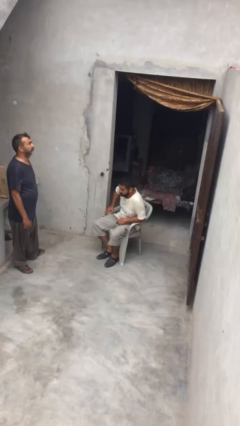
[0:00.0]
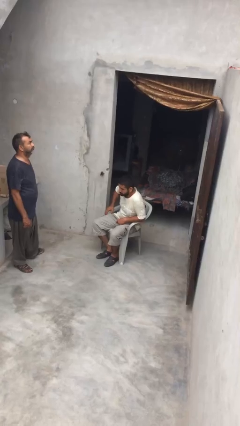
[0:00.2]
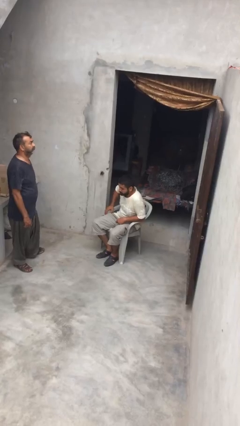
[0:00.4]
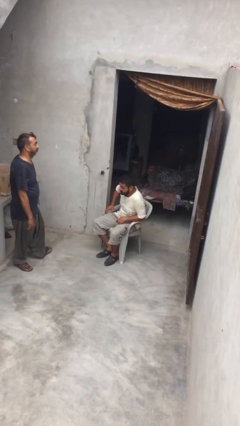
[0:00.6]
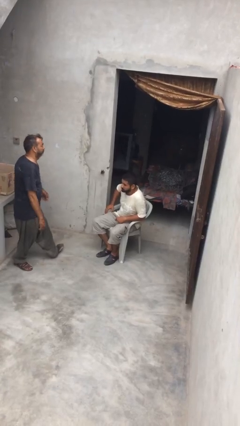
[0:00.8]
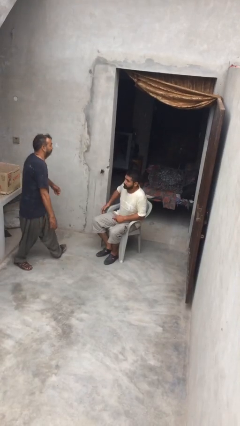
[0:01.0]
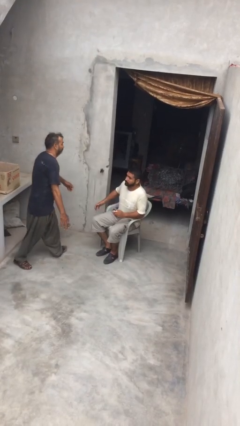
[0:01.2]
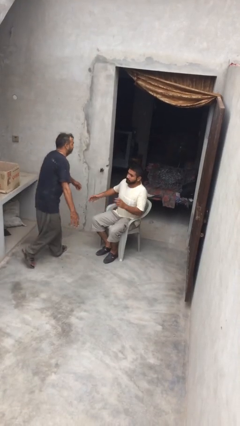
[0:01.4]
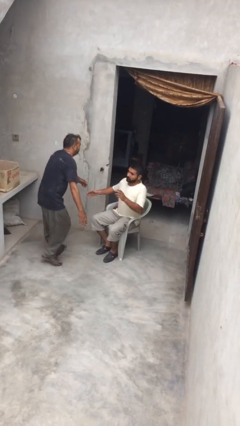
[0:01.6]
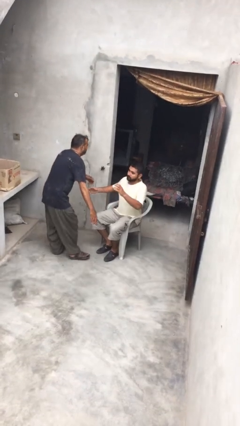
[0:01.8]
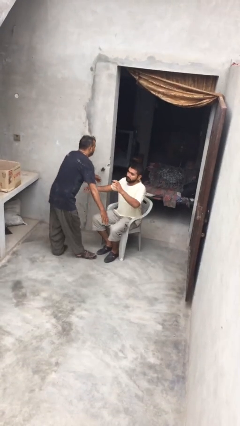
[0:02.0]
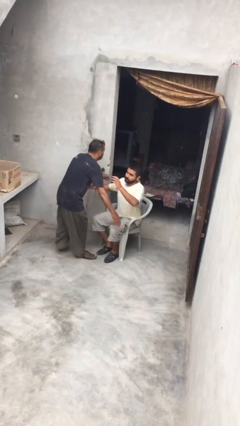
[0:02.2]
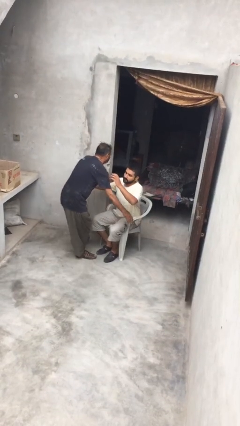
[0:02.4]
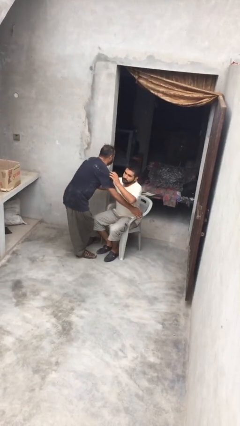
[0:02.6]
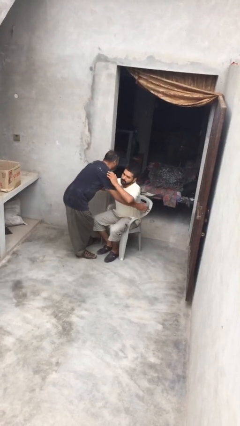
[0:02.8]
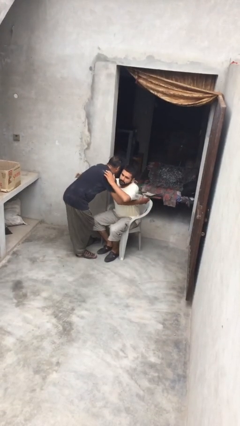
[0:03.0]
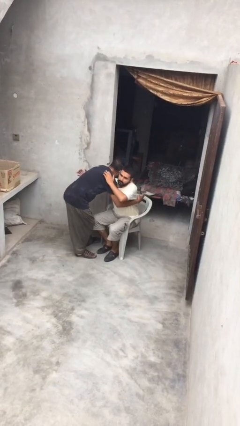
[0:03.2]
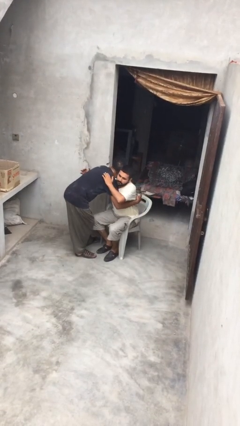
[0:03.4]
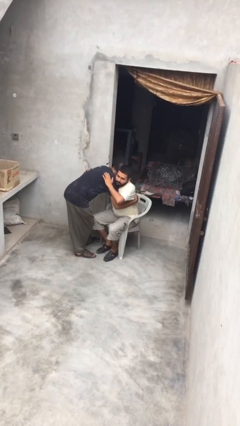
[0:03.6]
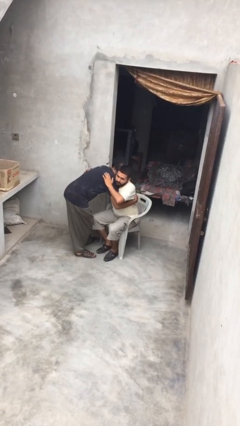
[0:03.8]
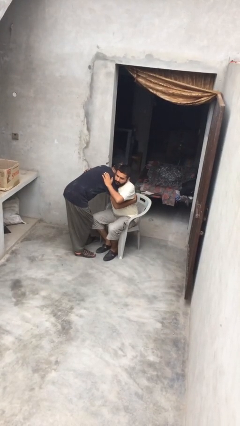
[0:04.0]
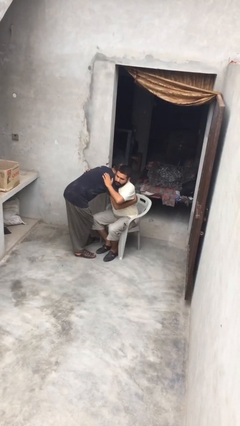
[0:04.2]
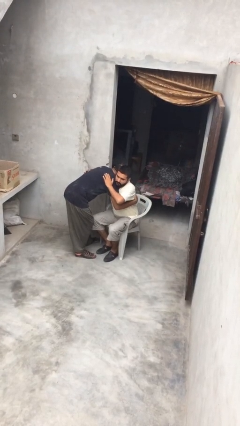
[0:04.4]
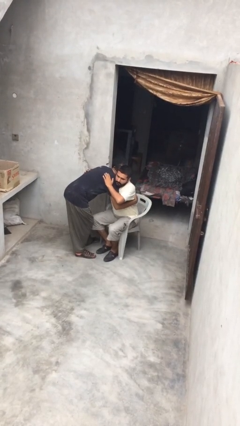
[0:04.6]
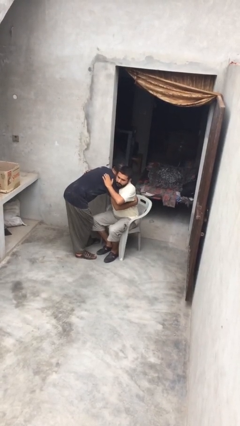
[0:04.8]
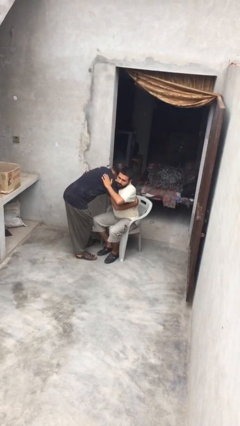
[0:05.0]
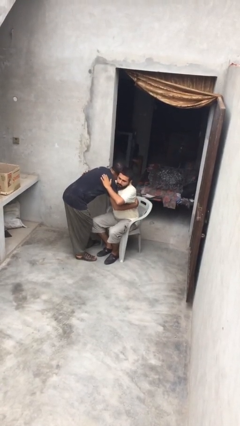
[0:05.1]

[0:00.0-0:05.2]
person embraces person

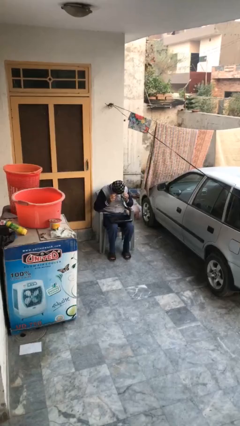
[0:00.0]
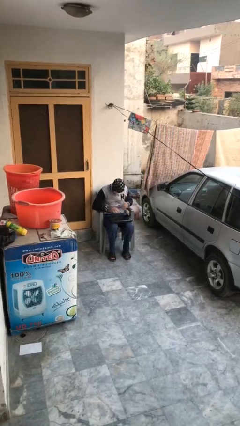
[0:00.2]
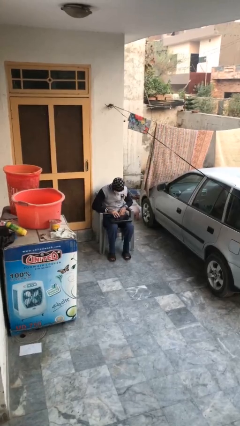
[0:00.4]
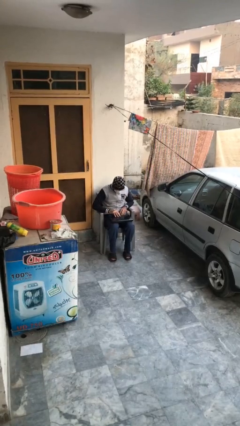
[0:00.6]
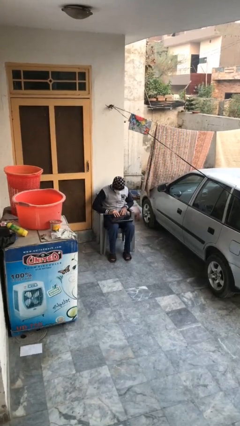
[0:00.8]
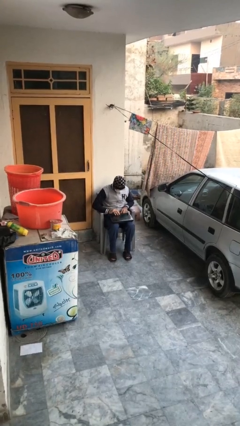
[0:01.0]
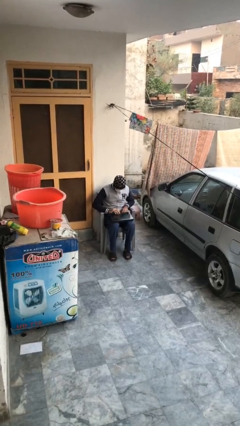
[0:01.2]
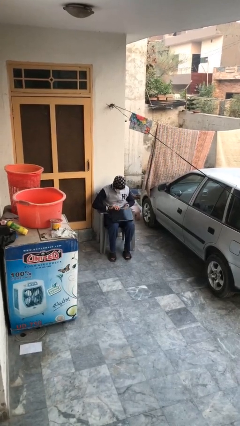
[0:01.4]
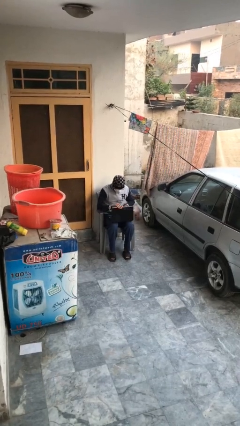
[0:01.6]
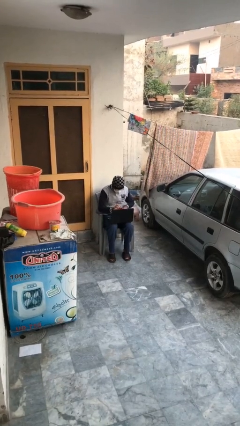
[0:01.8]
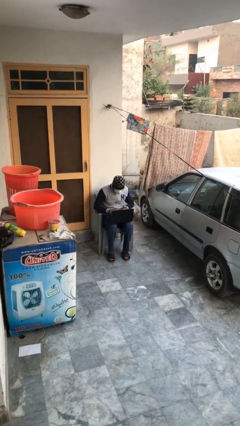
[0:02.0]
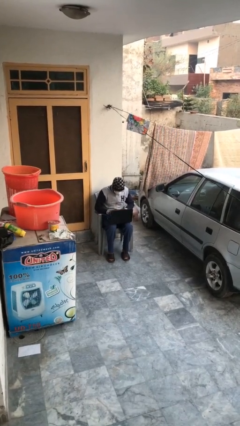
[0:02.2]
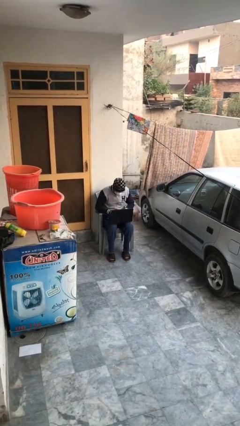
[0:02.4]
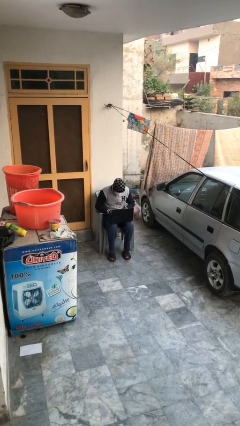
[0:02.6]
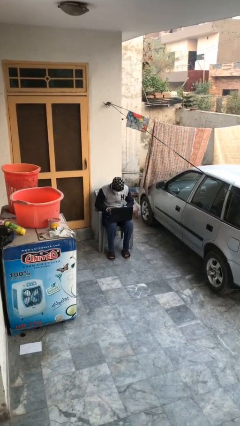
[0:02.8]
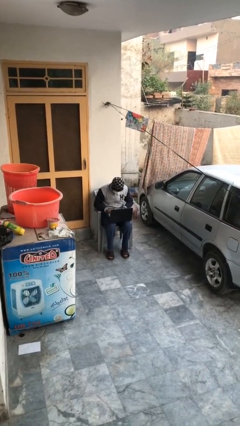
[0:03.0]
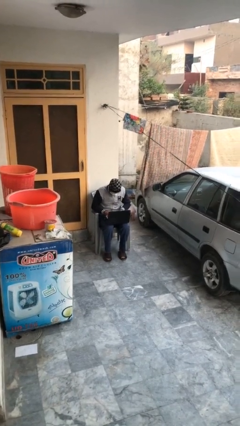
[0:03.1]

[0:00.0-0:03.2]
person interacts with laptop

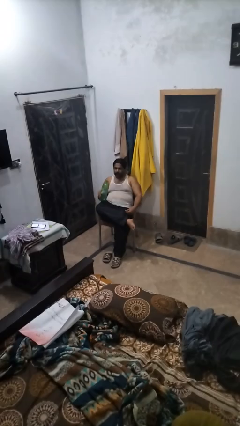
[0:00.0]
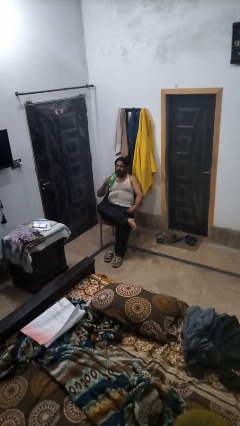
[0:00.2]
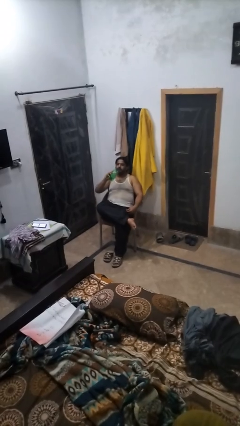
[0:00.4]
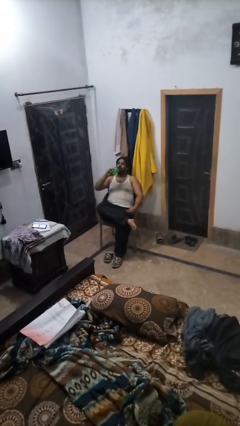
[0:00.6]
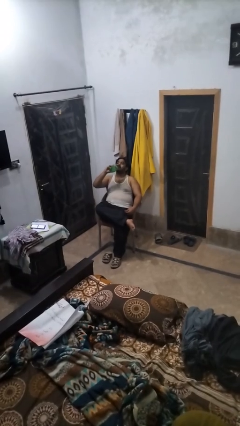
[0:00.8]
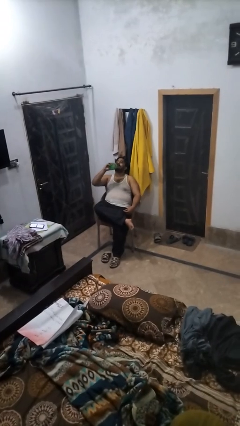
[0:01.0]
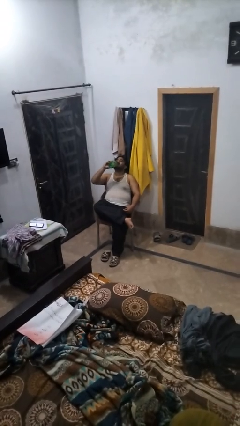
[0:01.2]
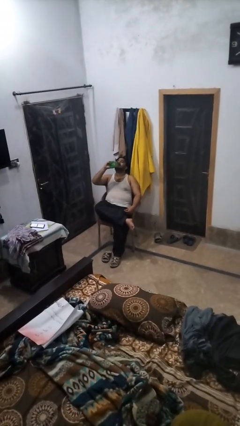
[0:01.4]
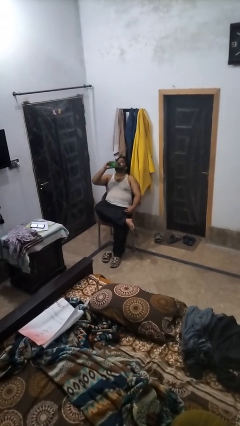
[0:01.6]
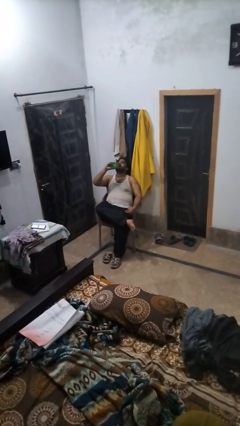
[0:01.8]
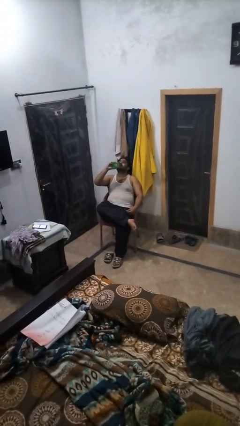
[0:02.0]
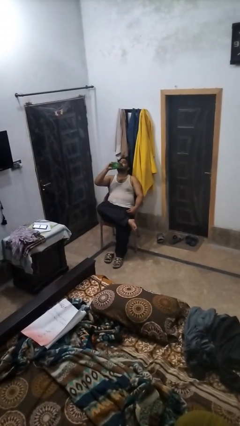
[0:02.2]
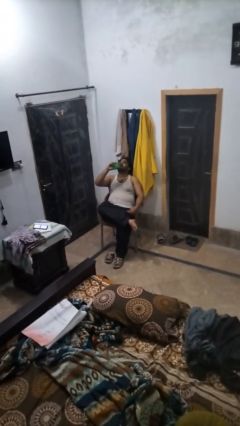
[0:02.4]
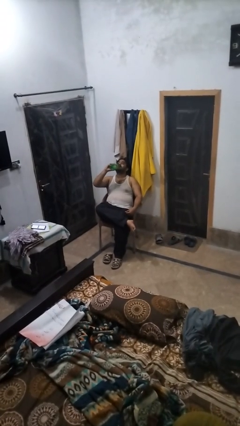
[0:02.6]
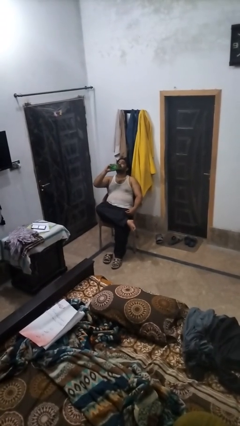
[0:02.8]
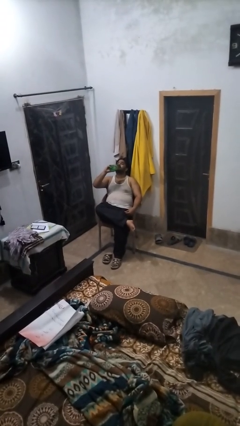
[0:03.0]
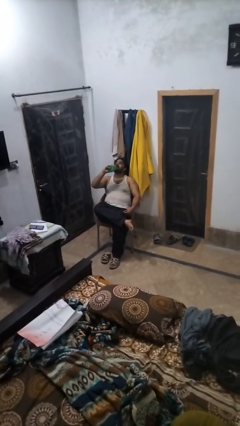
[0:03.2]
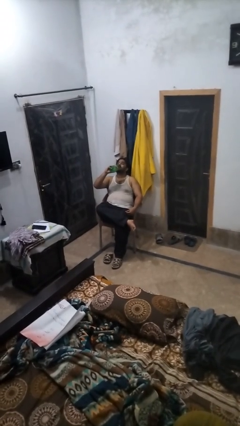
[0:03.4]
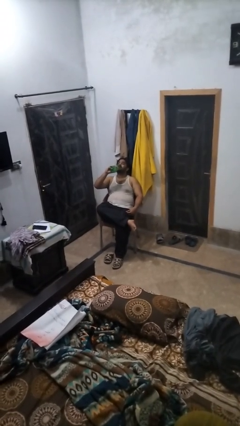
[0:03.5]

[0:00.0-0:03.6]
person drinks from bottle

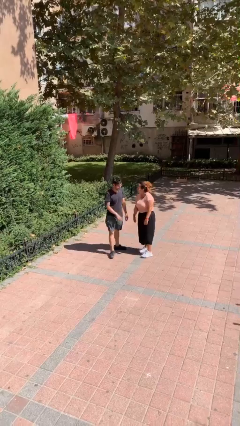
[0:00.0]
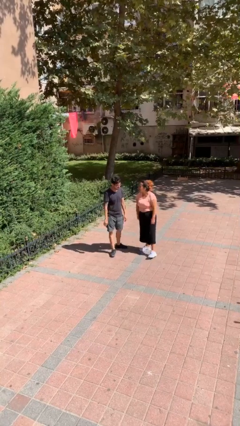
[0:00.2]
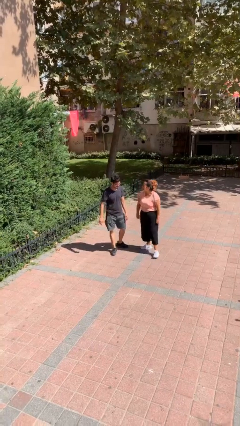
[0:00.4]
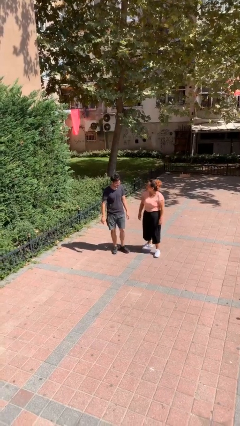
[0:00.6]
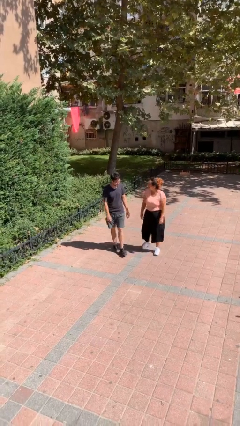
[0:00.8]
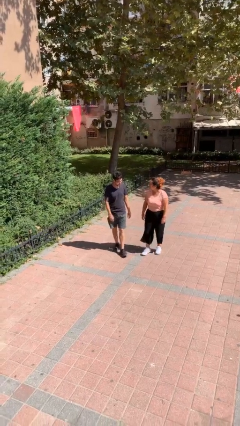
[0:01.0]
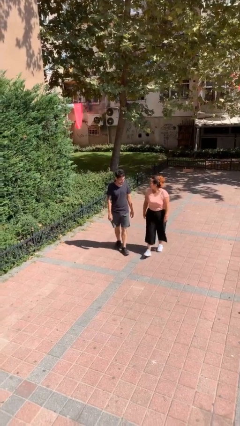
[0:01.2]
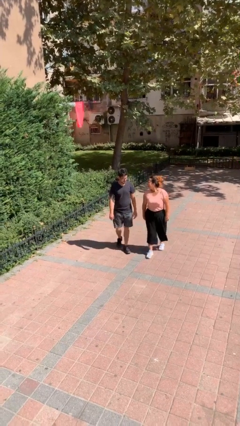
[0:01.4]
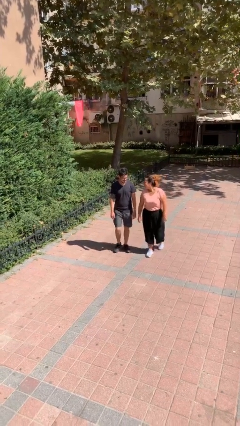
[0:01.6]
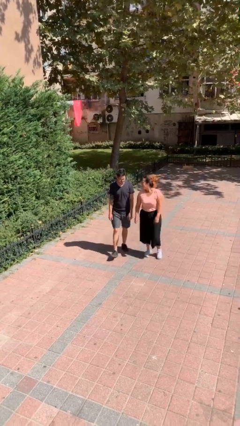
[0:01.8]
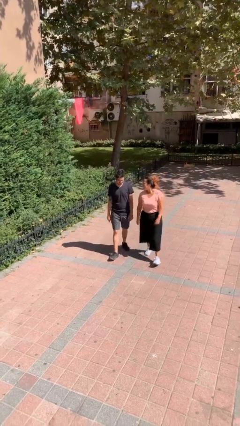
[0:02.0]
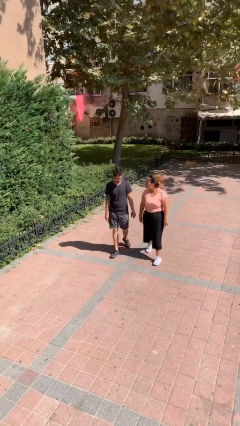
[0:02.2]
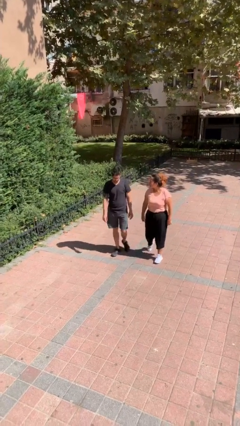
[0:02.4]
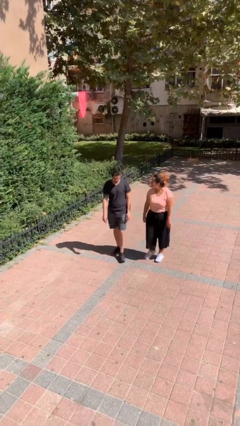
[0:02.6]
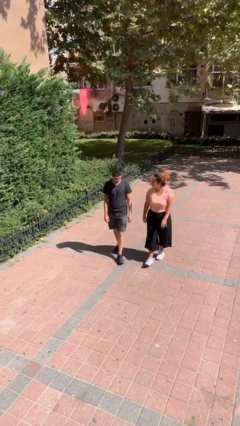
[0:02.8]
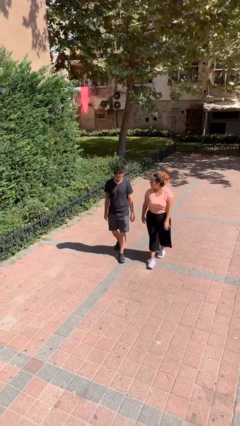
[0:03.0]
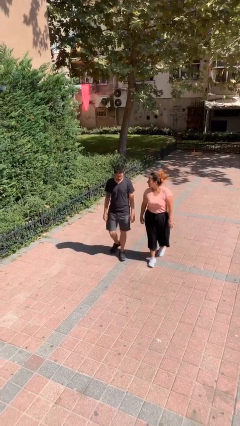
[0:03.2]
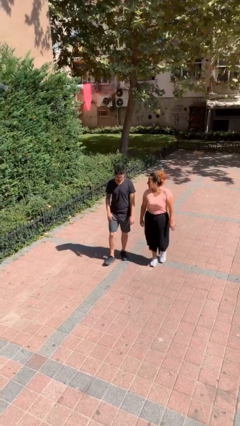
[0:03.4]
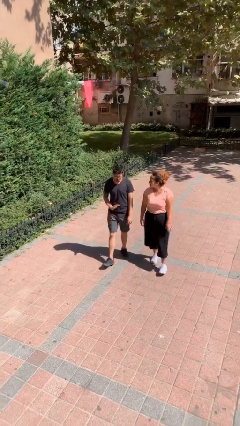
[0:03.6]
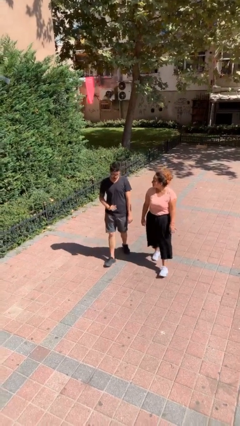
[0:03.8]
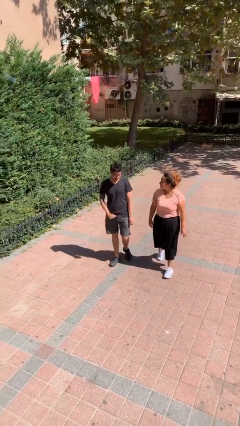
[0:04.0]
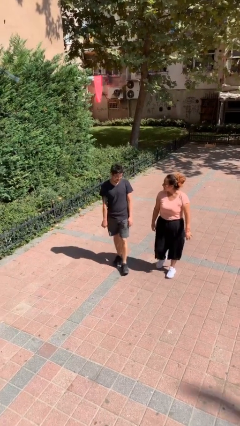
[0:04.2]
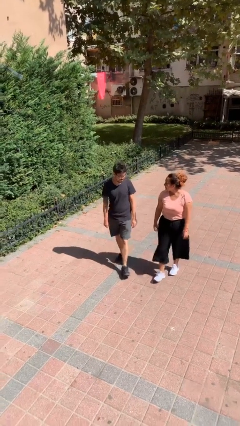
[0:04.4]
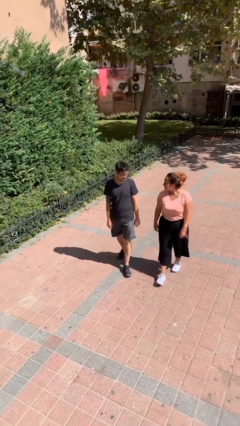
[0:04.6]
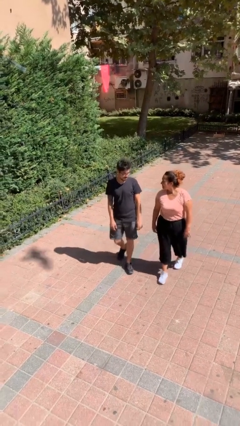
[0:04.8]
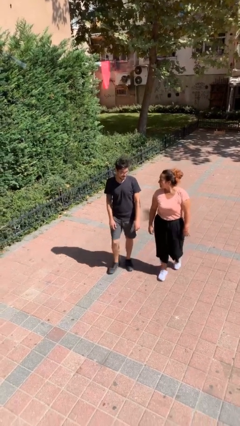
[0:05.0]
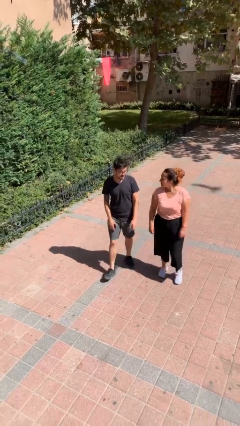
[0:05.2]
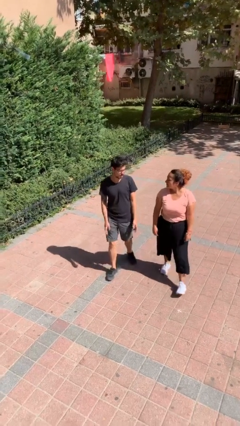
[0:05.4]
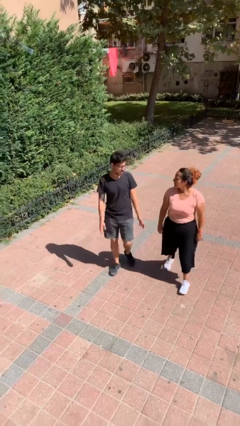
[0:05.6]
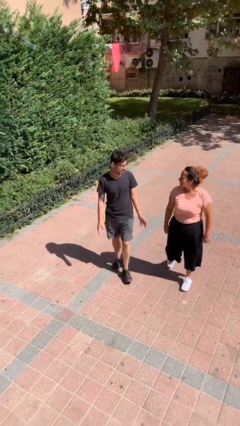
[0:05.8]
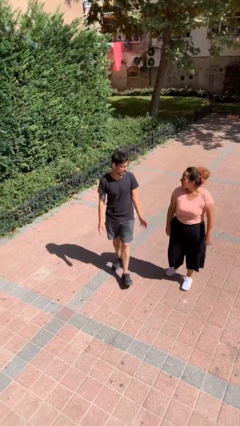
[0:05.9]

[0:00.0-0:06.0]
person talks to person
